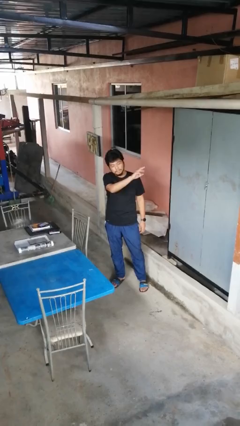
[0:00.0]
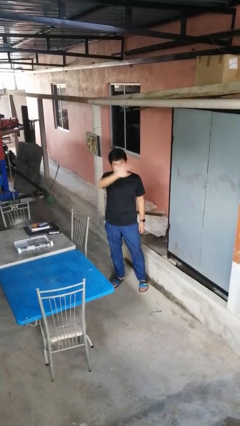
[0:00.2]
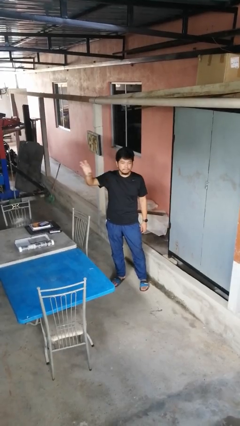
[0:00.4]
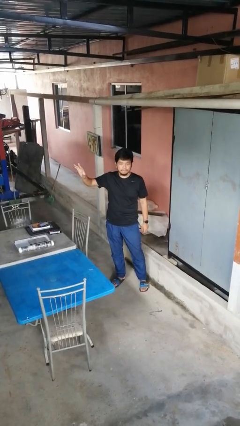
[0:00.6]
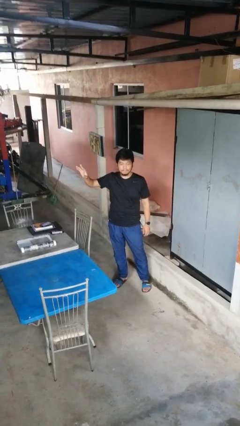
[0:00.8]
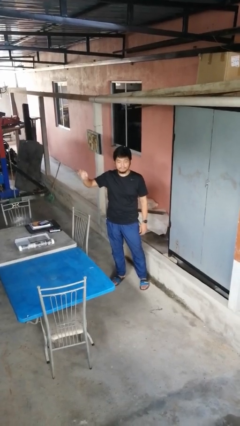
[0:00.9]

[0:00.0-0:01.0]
person gestures swipe right

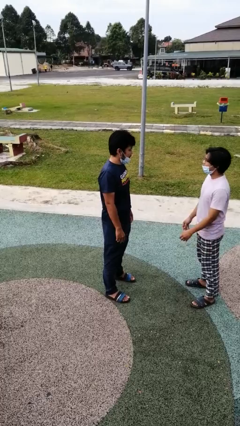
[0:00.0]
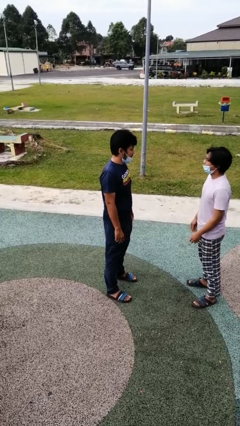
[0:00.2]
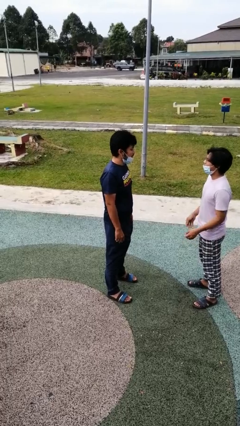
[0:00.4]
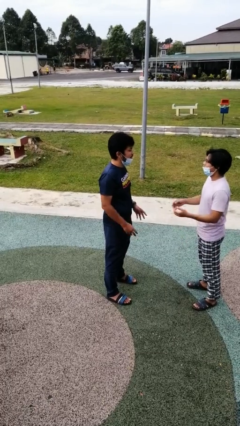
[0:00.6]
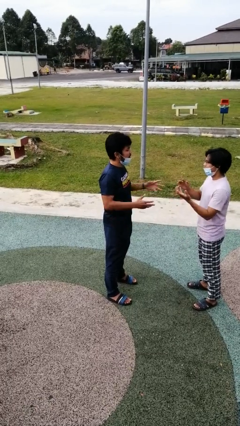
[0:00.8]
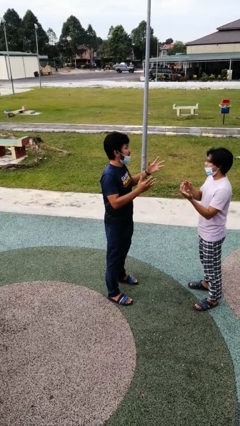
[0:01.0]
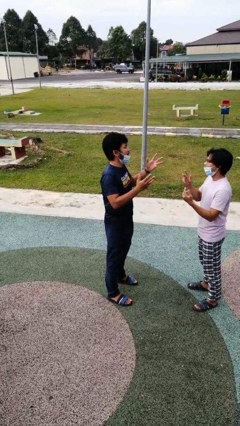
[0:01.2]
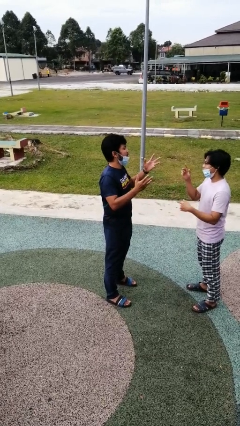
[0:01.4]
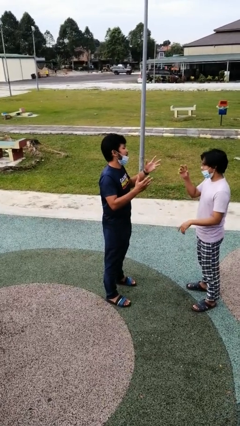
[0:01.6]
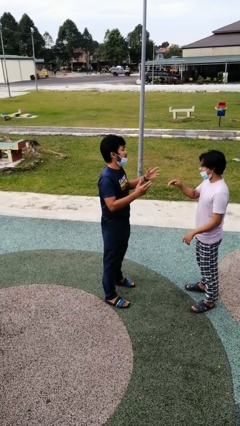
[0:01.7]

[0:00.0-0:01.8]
person talks to person

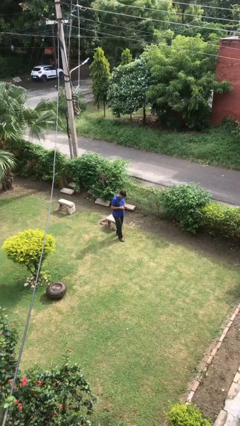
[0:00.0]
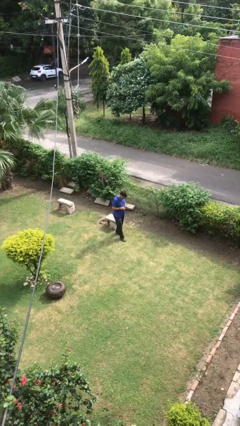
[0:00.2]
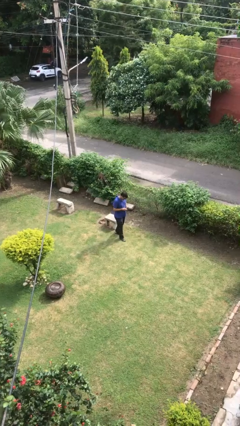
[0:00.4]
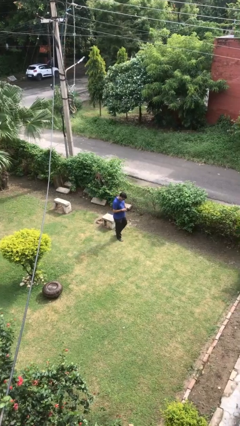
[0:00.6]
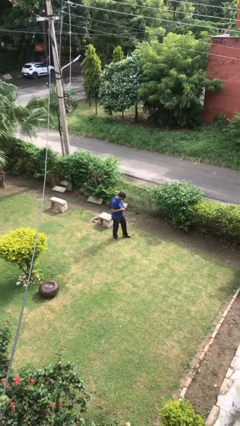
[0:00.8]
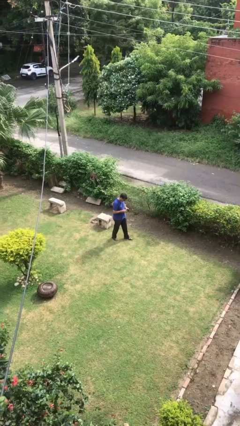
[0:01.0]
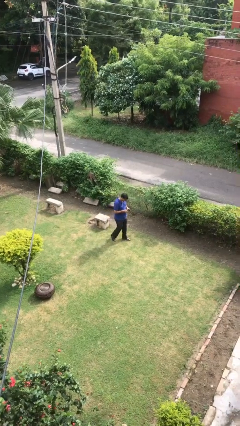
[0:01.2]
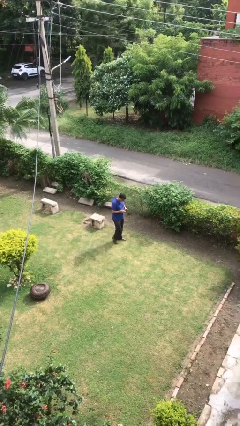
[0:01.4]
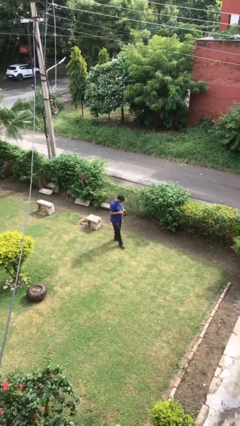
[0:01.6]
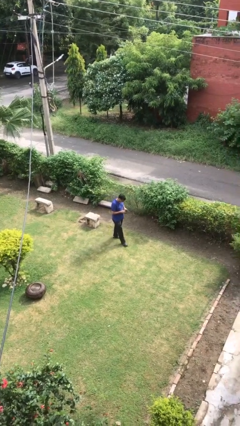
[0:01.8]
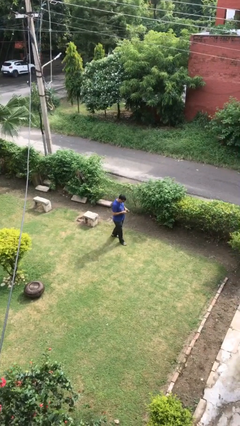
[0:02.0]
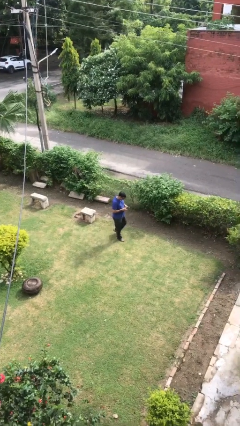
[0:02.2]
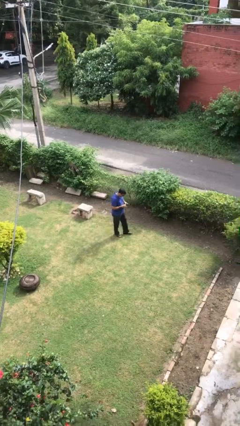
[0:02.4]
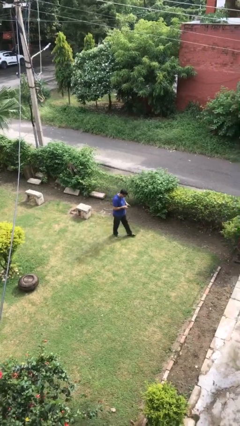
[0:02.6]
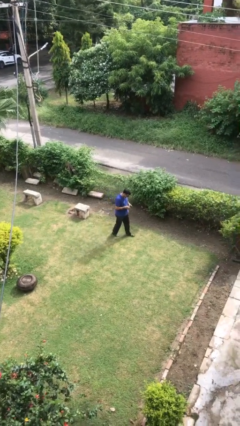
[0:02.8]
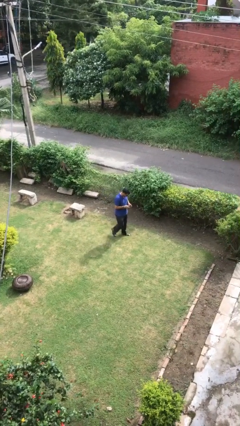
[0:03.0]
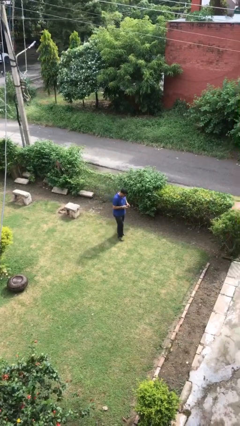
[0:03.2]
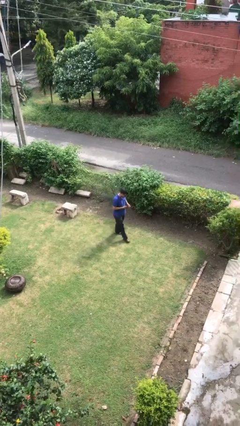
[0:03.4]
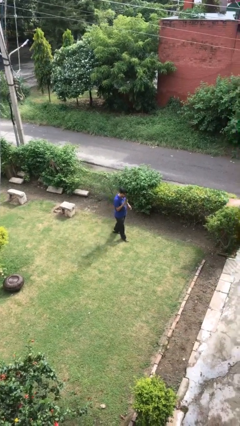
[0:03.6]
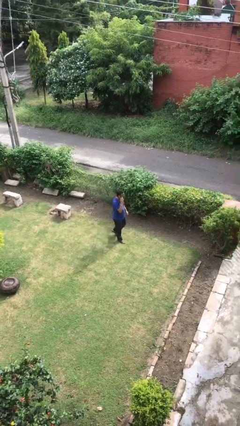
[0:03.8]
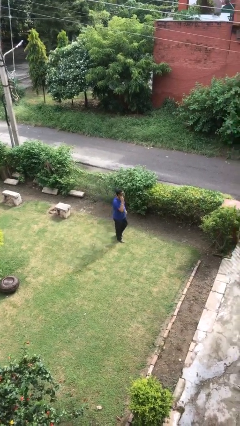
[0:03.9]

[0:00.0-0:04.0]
person texts on phone

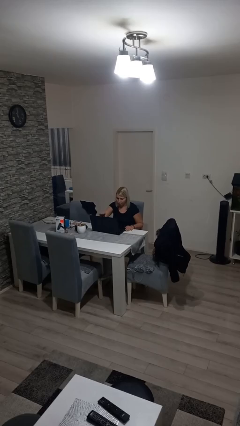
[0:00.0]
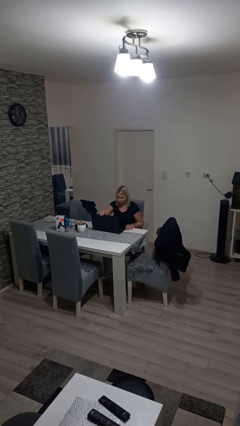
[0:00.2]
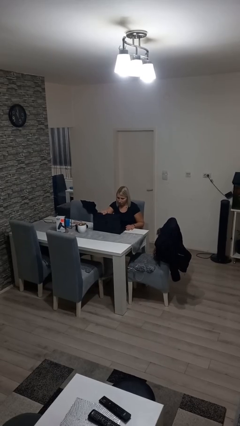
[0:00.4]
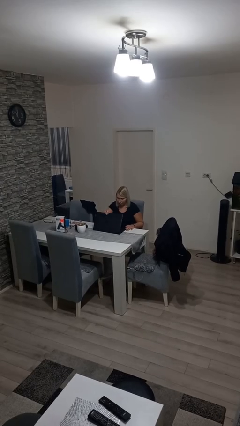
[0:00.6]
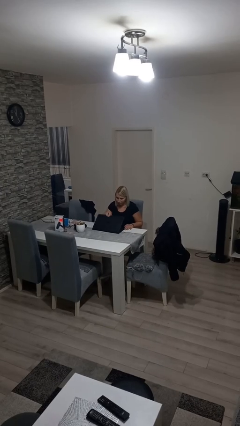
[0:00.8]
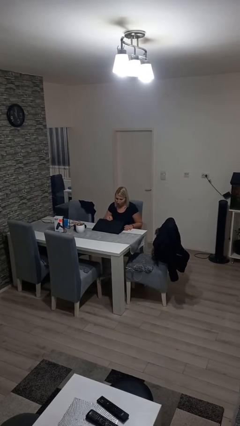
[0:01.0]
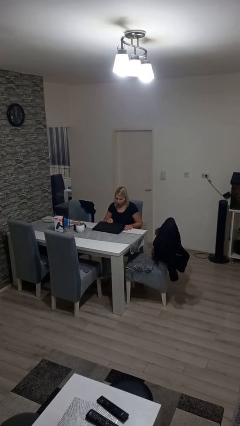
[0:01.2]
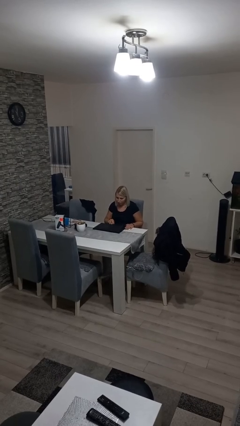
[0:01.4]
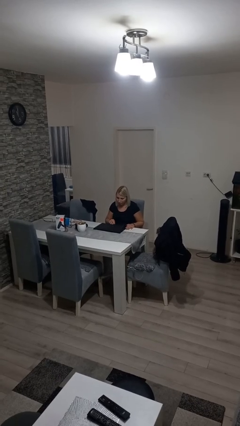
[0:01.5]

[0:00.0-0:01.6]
person closes laptop

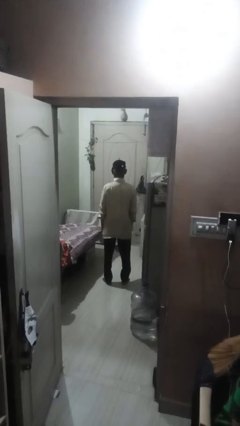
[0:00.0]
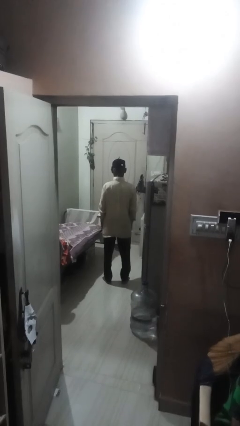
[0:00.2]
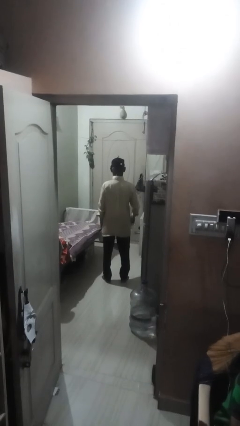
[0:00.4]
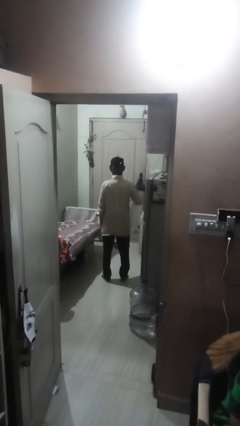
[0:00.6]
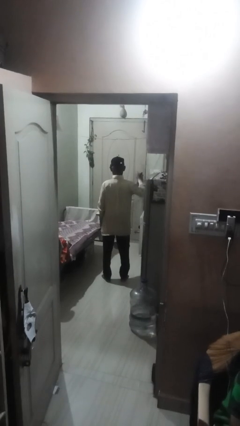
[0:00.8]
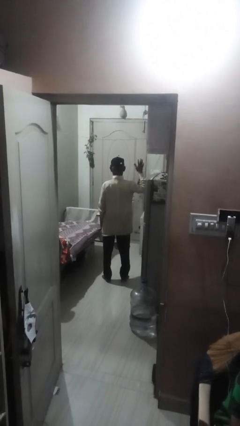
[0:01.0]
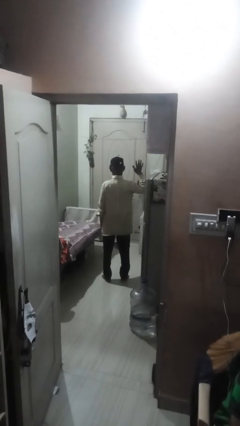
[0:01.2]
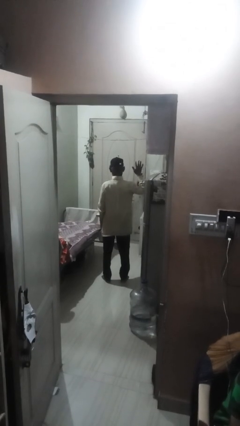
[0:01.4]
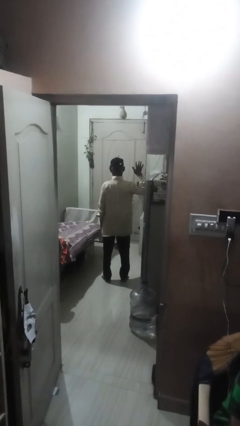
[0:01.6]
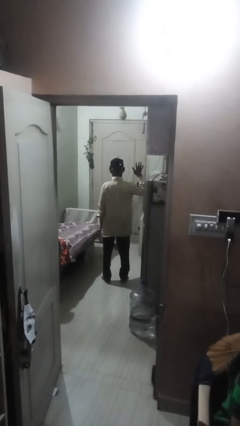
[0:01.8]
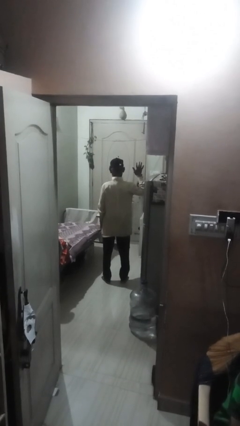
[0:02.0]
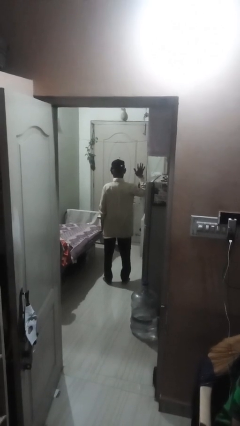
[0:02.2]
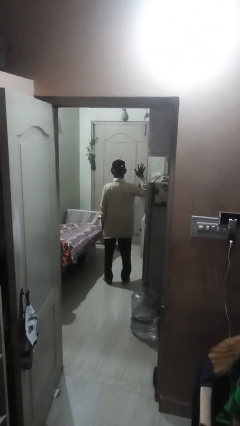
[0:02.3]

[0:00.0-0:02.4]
person gestures number five

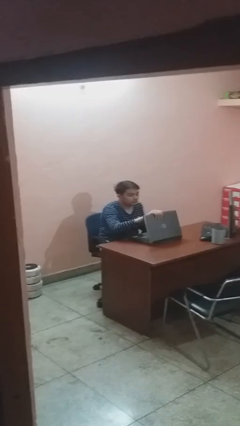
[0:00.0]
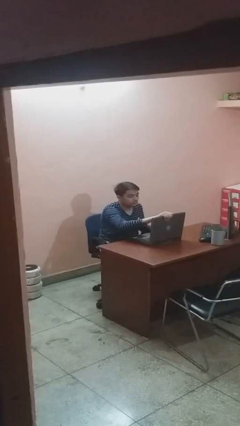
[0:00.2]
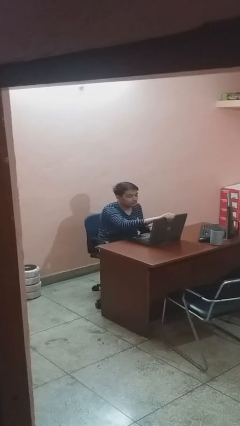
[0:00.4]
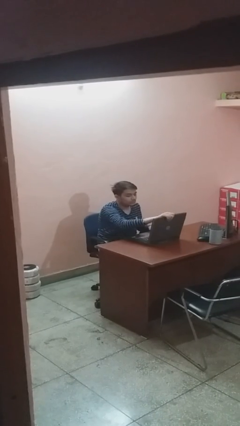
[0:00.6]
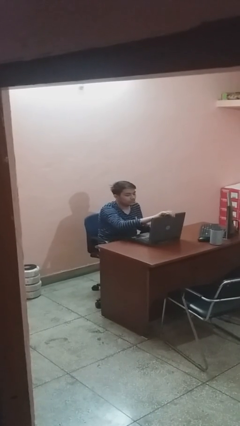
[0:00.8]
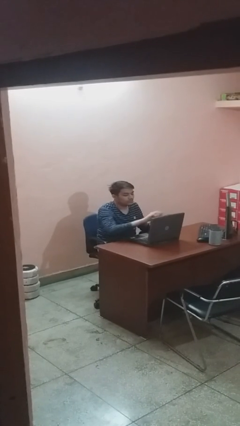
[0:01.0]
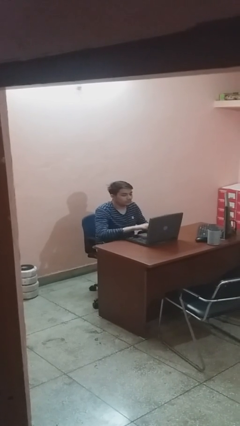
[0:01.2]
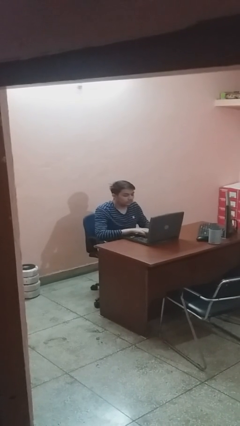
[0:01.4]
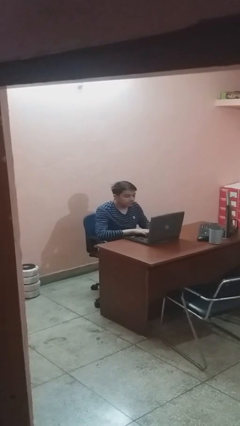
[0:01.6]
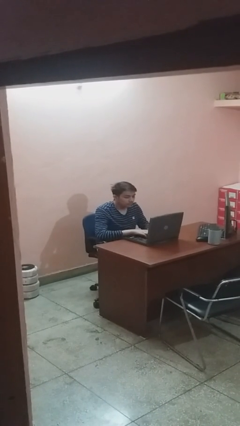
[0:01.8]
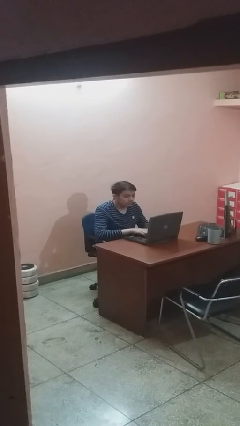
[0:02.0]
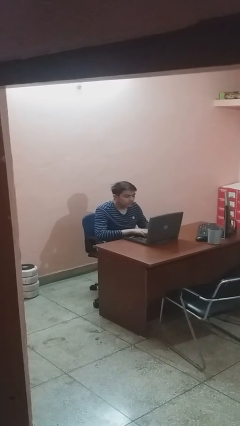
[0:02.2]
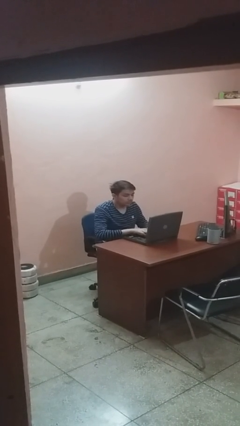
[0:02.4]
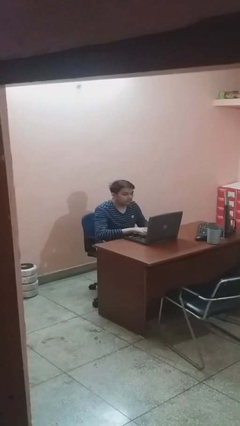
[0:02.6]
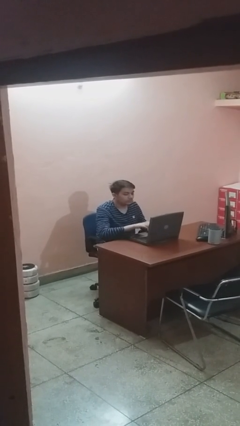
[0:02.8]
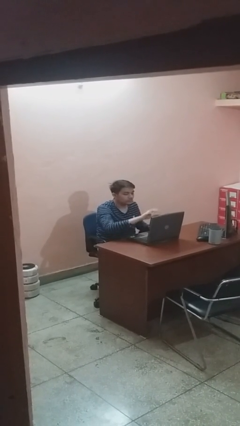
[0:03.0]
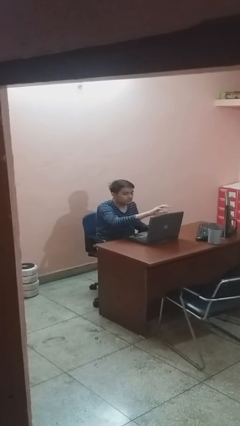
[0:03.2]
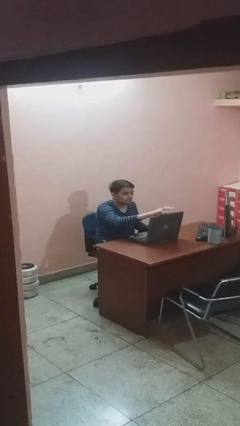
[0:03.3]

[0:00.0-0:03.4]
person interacts with laptop

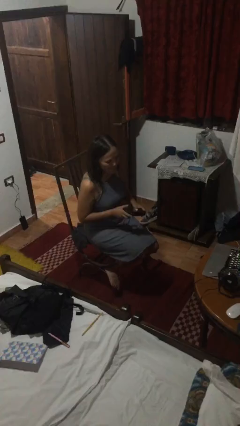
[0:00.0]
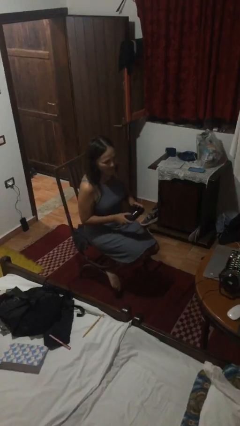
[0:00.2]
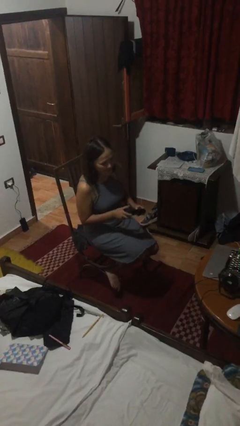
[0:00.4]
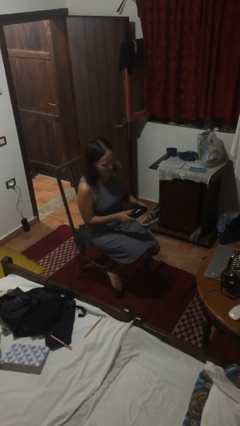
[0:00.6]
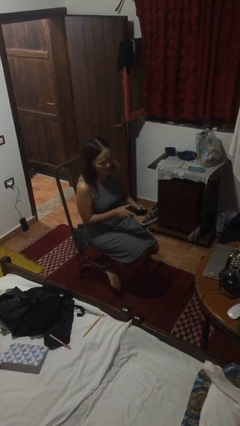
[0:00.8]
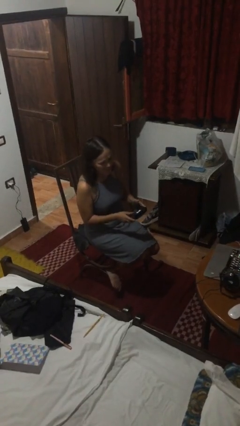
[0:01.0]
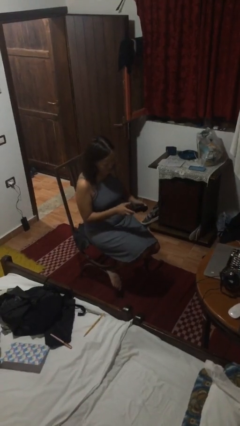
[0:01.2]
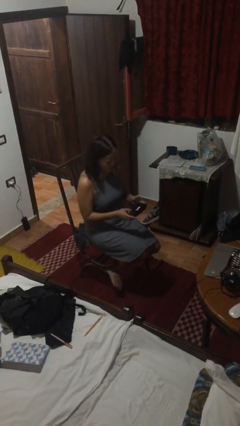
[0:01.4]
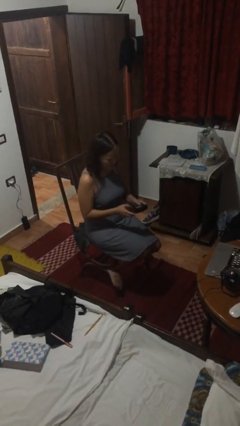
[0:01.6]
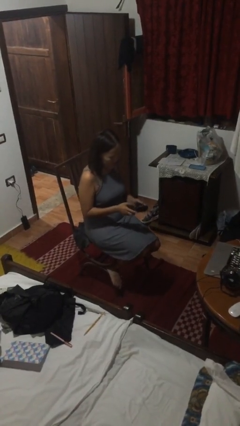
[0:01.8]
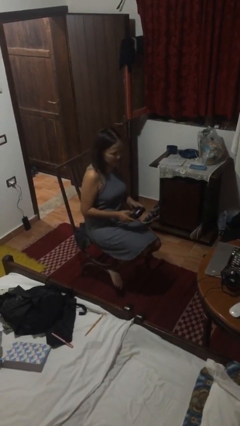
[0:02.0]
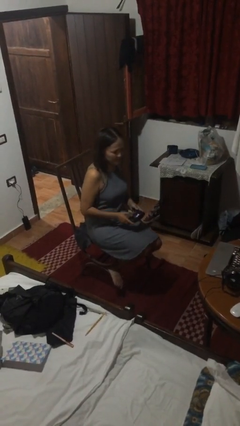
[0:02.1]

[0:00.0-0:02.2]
person interacts with handheld game

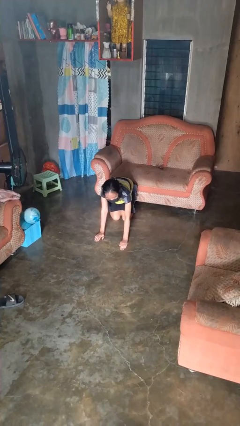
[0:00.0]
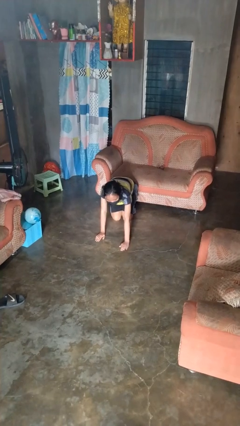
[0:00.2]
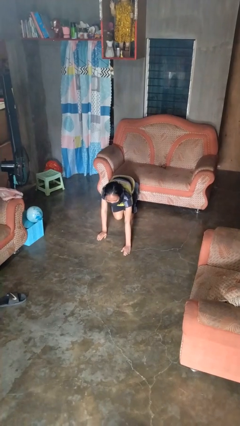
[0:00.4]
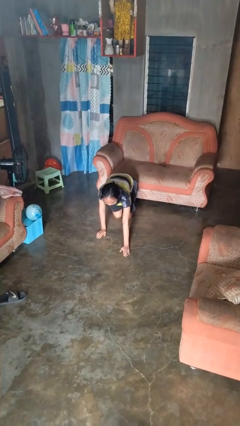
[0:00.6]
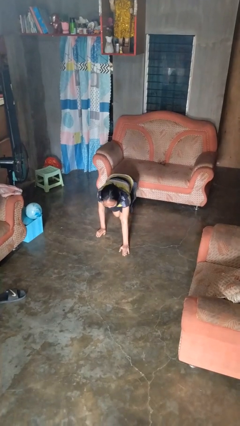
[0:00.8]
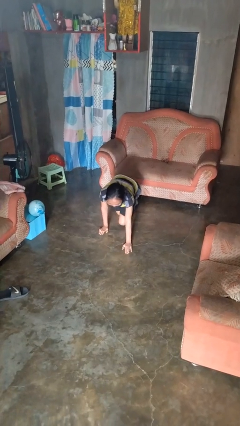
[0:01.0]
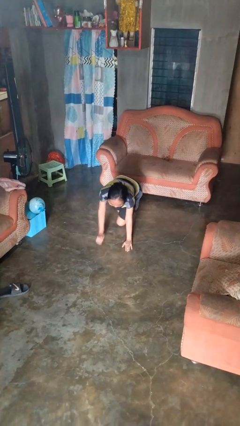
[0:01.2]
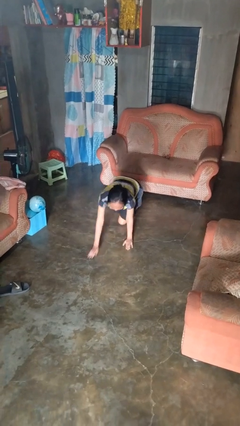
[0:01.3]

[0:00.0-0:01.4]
person crawls
